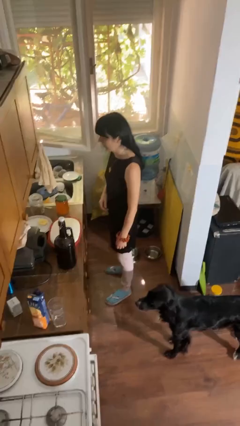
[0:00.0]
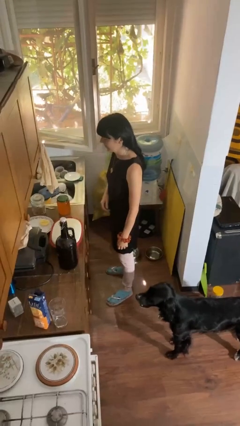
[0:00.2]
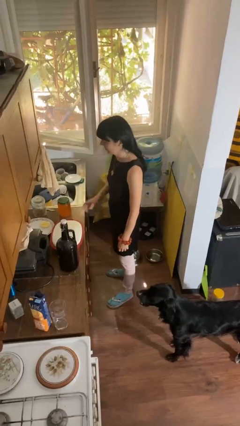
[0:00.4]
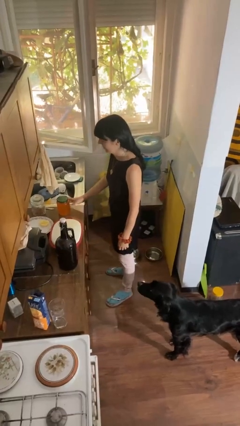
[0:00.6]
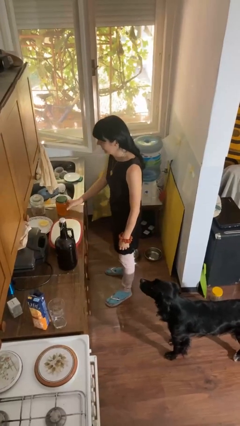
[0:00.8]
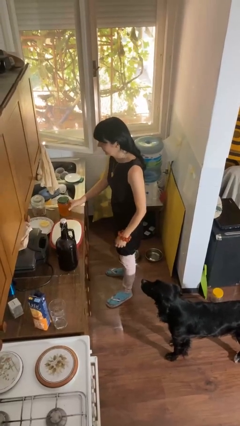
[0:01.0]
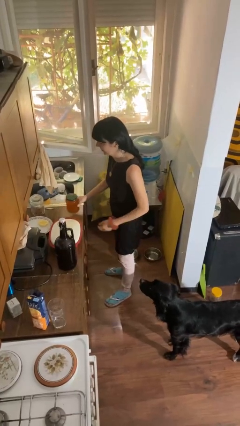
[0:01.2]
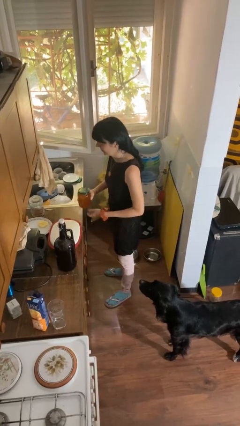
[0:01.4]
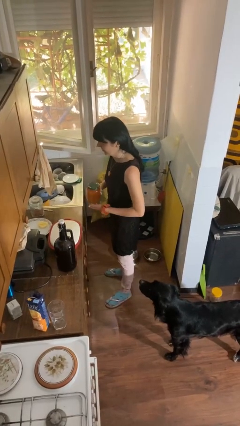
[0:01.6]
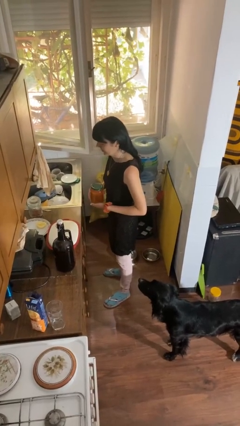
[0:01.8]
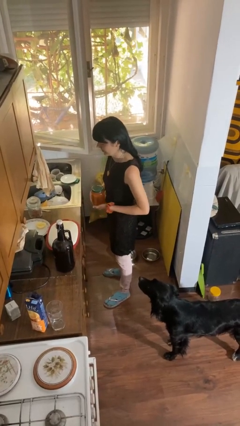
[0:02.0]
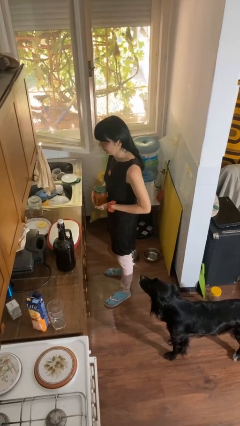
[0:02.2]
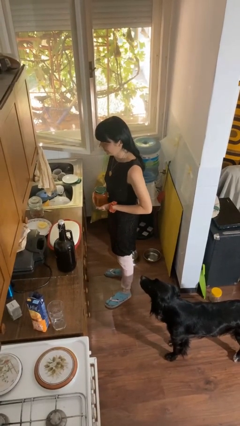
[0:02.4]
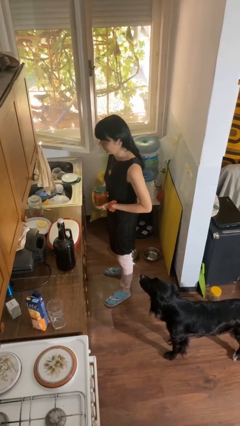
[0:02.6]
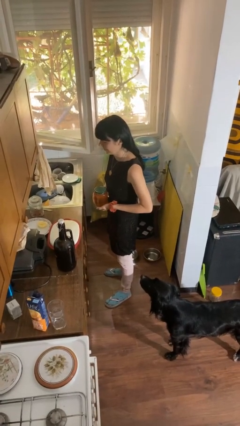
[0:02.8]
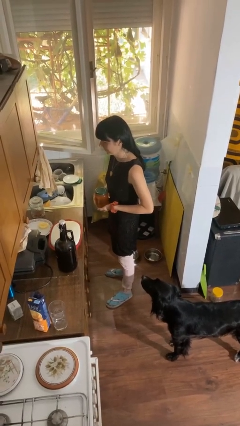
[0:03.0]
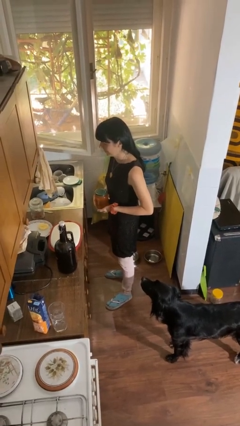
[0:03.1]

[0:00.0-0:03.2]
person picks up object from countertop

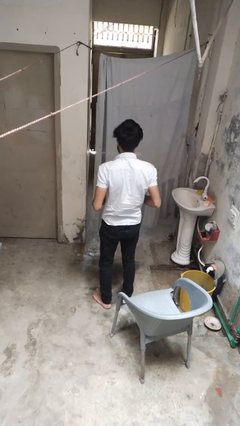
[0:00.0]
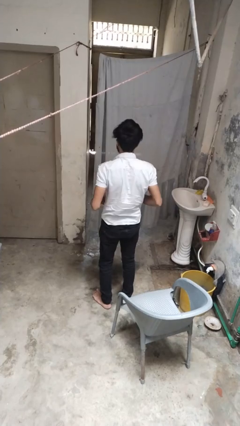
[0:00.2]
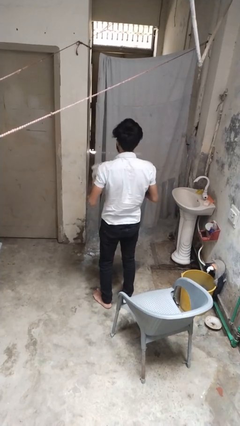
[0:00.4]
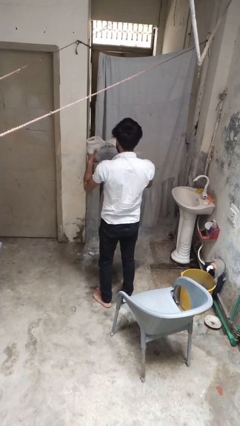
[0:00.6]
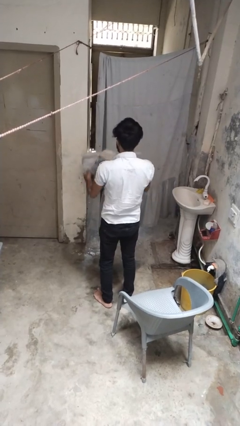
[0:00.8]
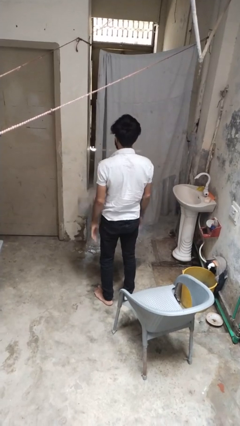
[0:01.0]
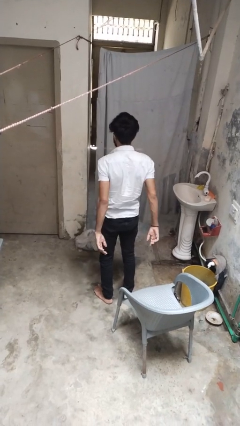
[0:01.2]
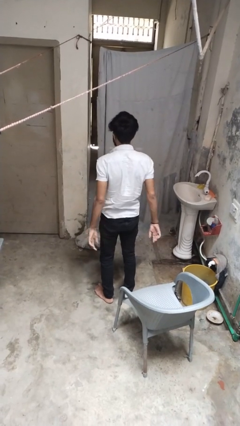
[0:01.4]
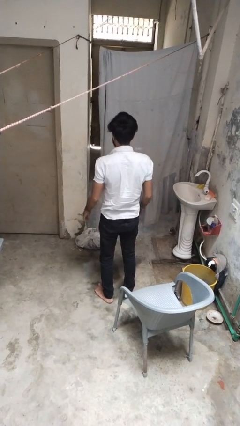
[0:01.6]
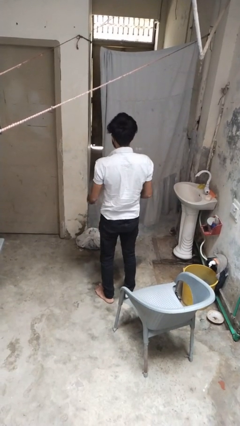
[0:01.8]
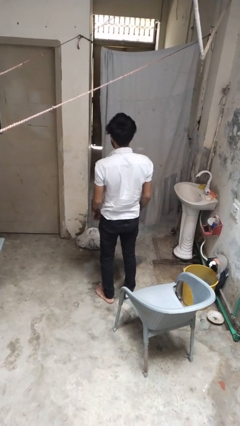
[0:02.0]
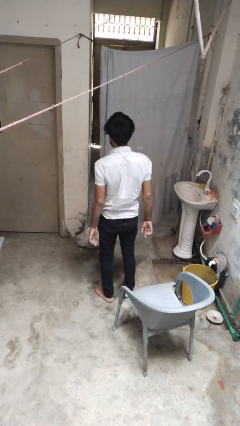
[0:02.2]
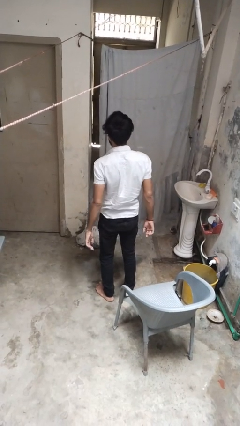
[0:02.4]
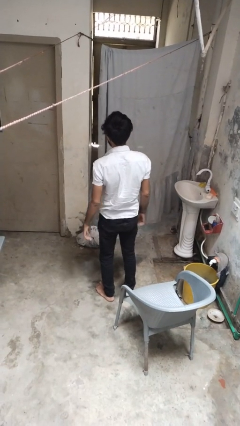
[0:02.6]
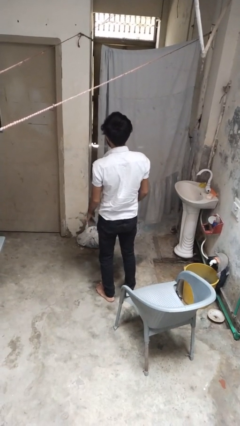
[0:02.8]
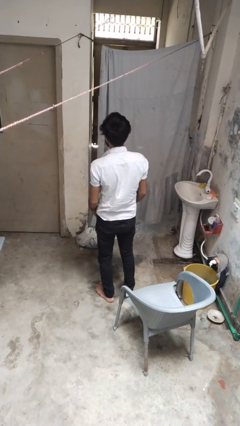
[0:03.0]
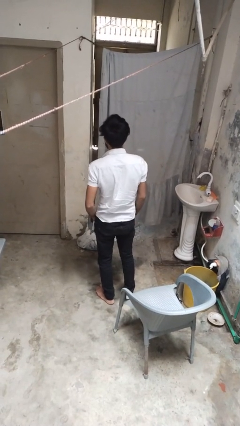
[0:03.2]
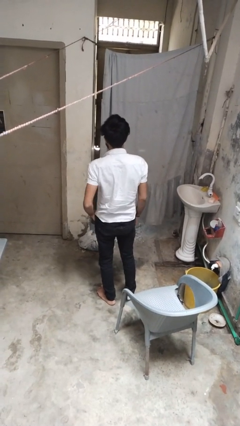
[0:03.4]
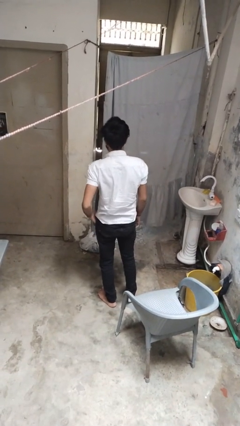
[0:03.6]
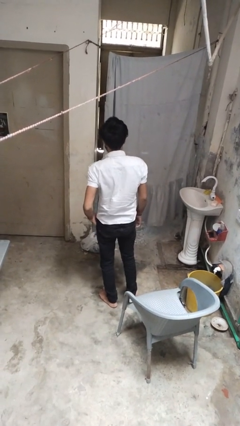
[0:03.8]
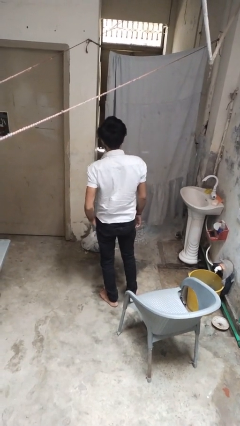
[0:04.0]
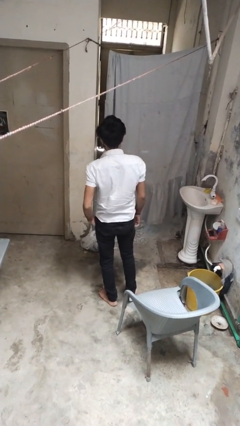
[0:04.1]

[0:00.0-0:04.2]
person throws object to ground

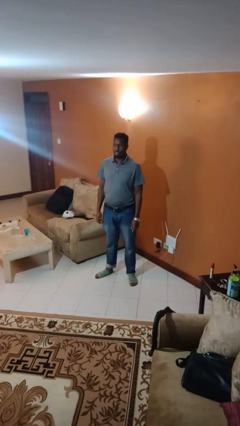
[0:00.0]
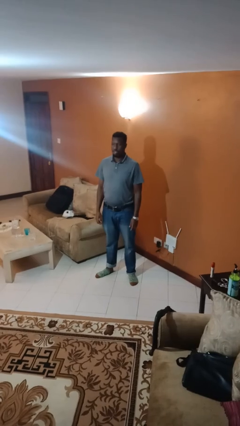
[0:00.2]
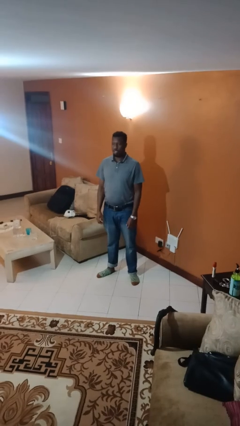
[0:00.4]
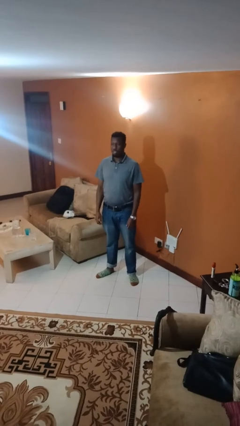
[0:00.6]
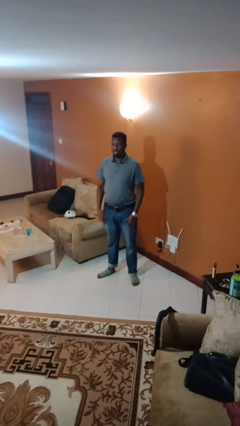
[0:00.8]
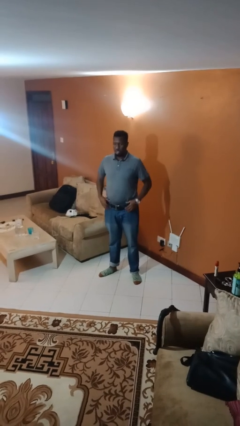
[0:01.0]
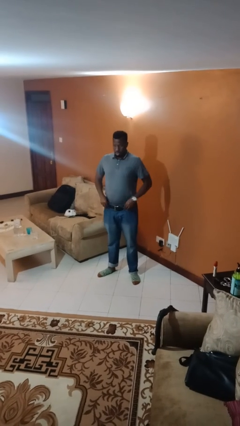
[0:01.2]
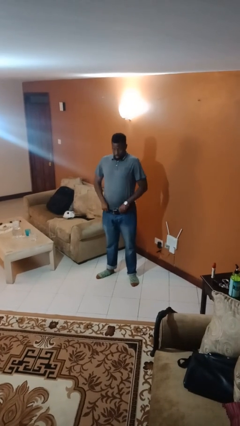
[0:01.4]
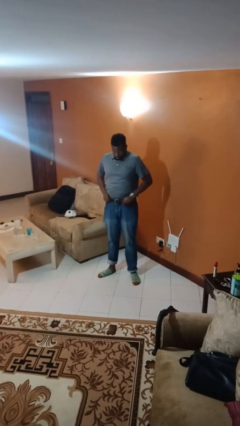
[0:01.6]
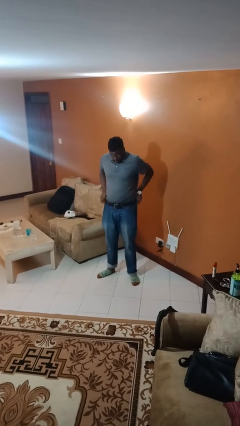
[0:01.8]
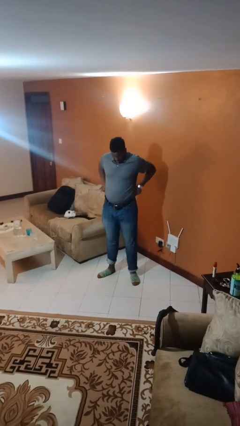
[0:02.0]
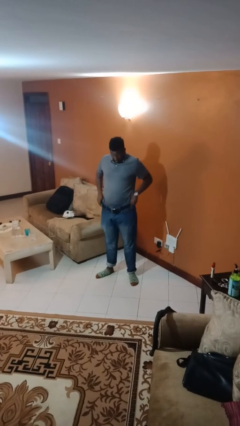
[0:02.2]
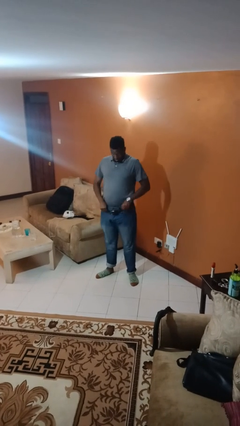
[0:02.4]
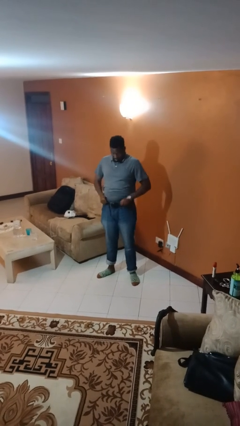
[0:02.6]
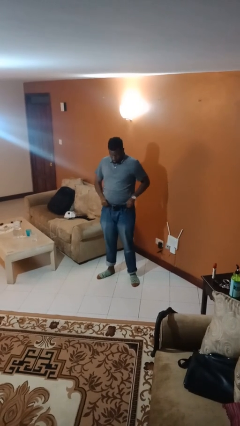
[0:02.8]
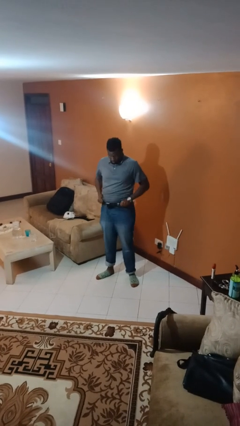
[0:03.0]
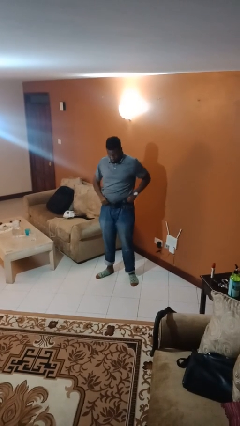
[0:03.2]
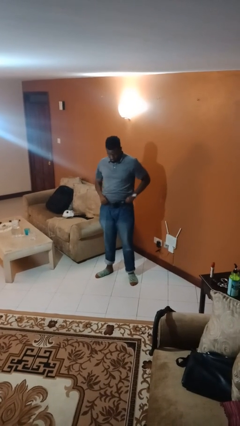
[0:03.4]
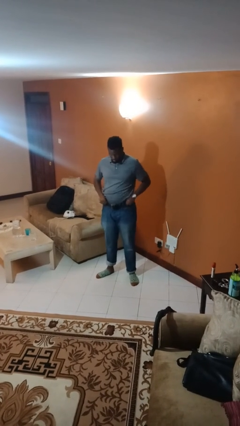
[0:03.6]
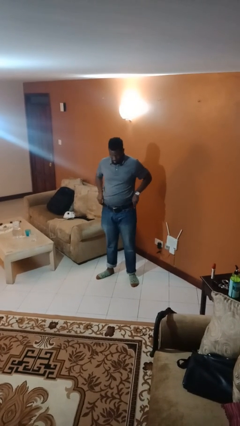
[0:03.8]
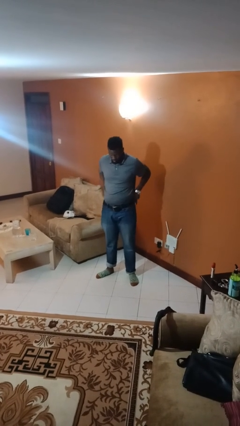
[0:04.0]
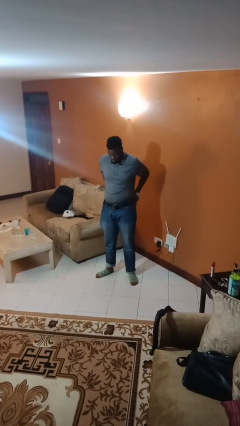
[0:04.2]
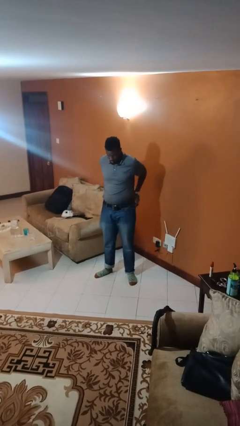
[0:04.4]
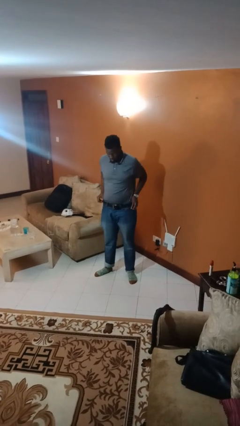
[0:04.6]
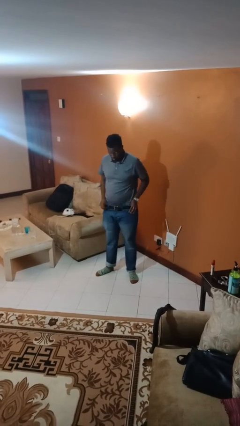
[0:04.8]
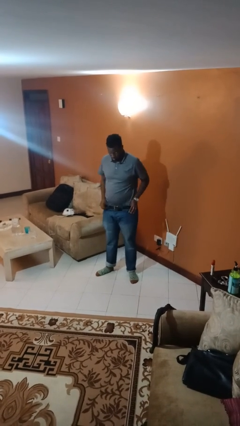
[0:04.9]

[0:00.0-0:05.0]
person hikes up pants

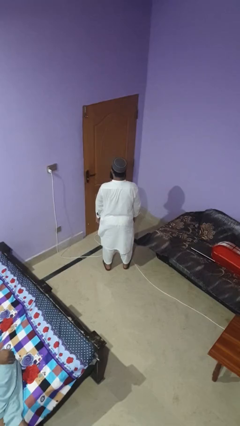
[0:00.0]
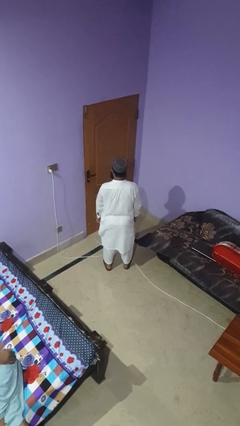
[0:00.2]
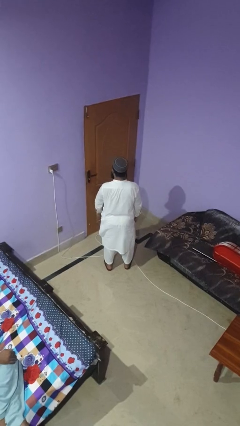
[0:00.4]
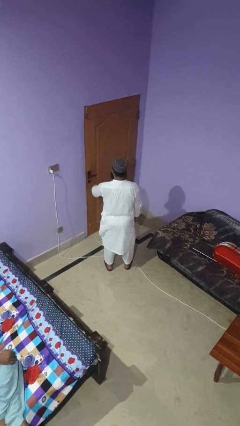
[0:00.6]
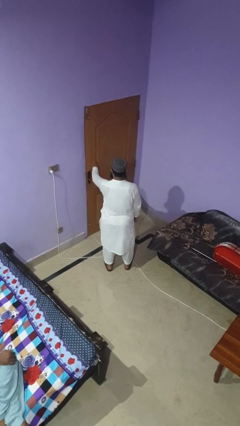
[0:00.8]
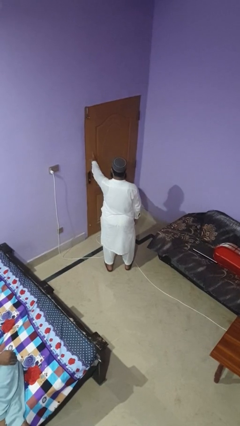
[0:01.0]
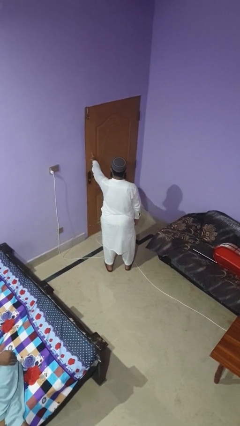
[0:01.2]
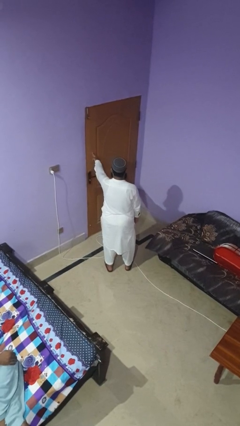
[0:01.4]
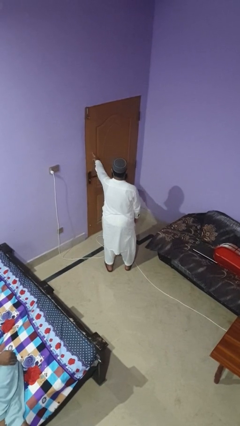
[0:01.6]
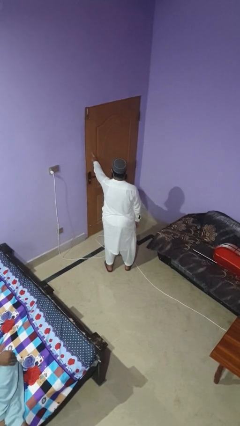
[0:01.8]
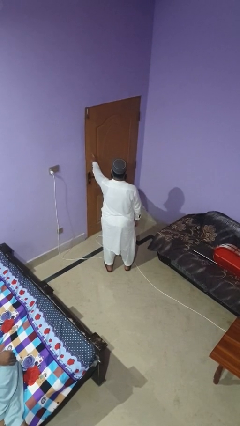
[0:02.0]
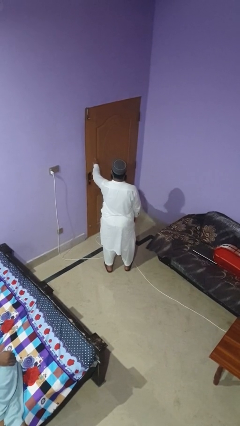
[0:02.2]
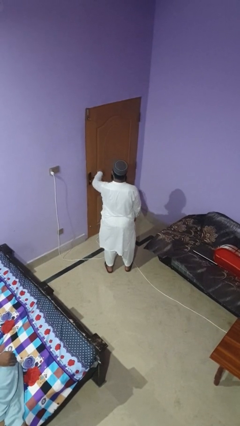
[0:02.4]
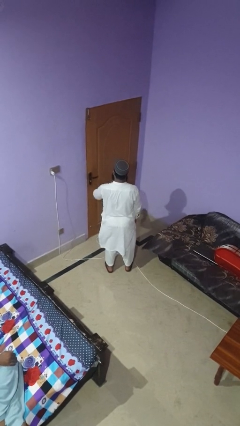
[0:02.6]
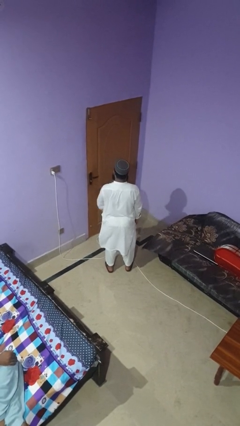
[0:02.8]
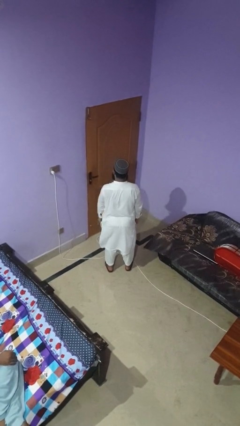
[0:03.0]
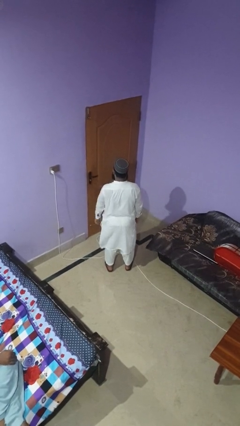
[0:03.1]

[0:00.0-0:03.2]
person taps object with finger

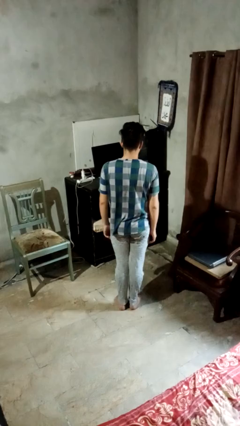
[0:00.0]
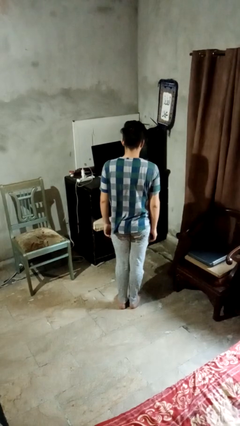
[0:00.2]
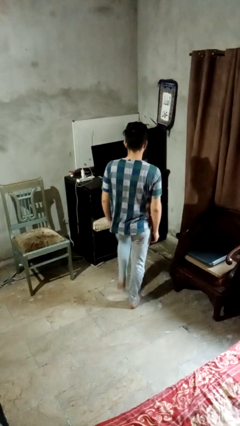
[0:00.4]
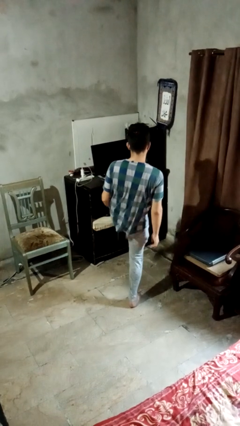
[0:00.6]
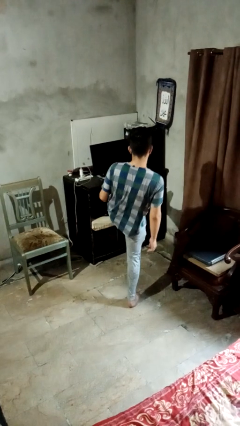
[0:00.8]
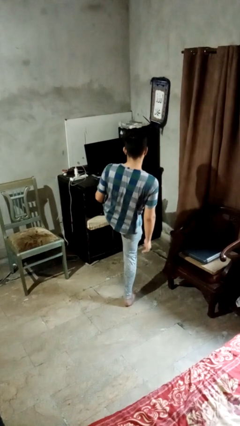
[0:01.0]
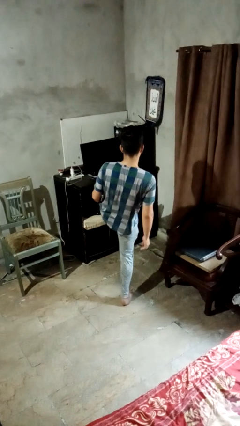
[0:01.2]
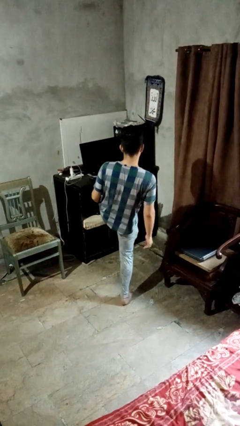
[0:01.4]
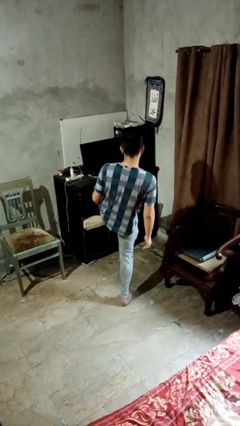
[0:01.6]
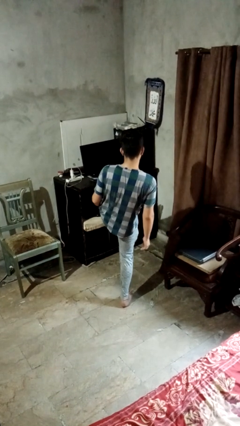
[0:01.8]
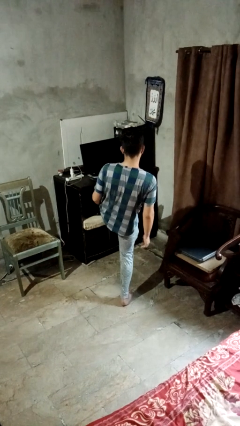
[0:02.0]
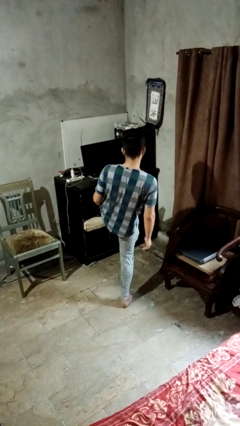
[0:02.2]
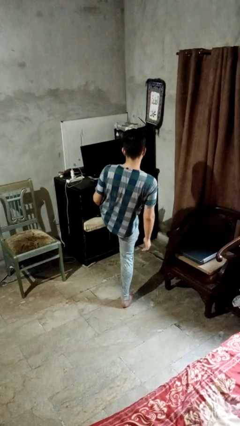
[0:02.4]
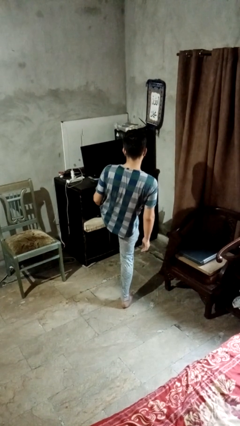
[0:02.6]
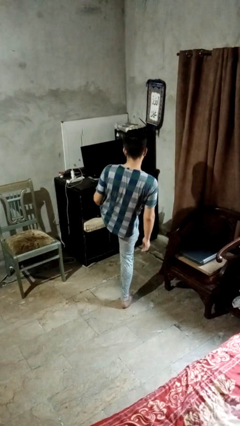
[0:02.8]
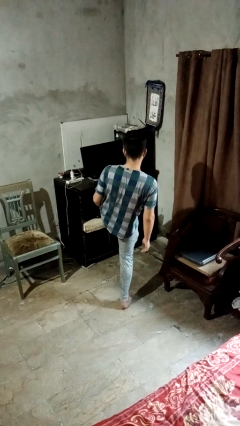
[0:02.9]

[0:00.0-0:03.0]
person karate kicks
